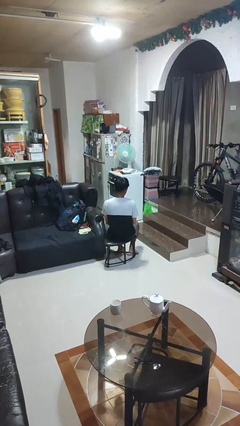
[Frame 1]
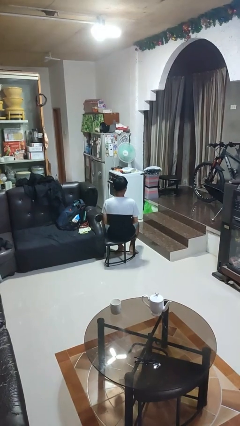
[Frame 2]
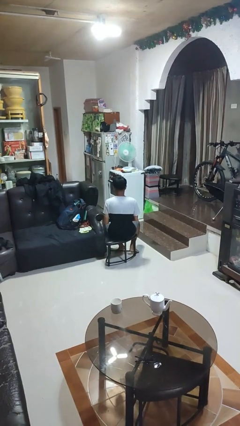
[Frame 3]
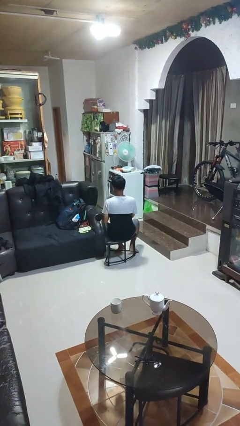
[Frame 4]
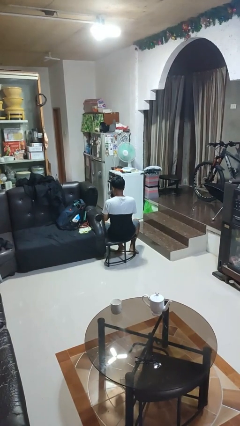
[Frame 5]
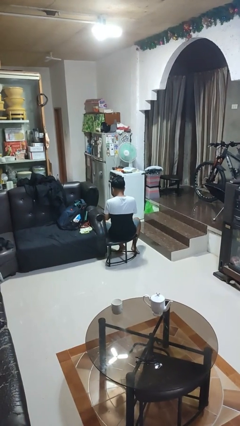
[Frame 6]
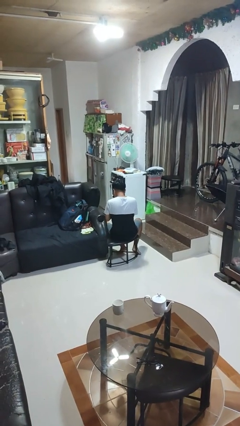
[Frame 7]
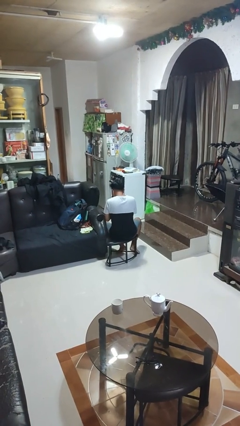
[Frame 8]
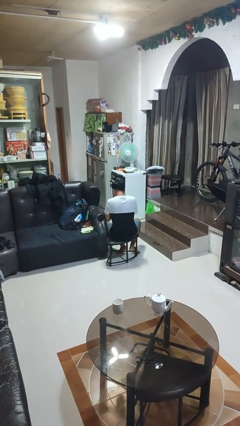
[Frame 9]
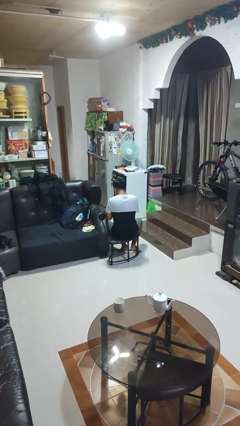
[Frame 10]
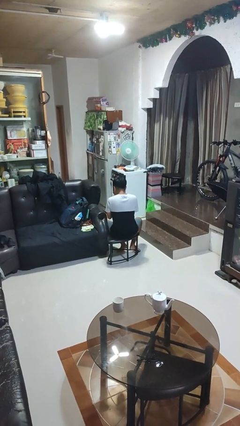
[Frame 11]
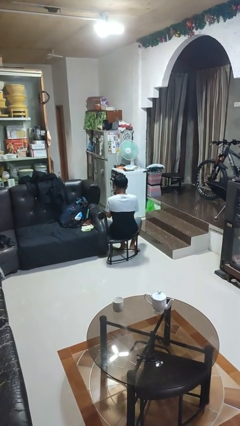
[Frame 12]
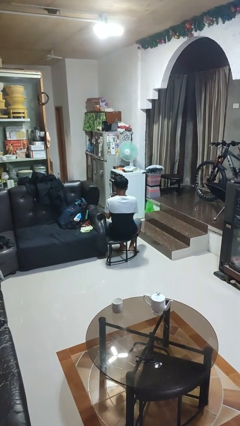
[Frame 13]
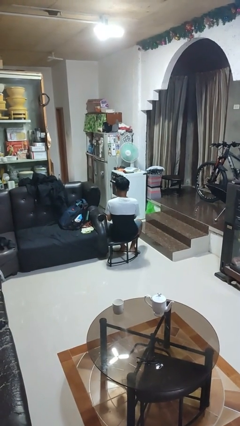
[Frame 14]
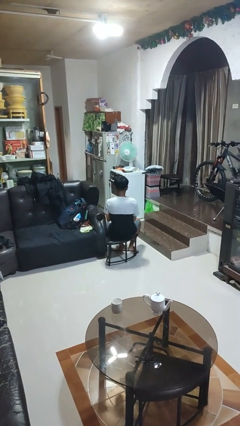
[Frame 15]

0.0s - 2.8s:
person dries hair with hairdryer

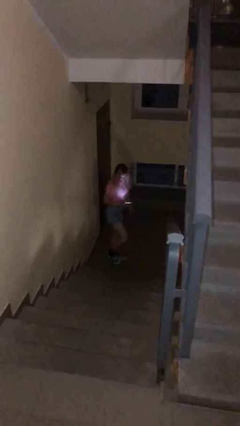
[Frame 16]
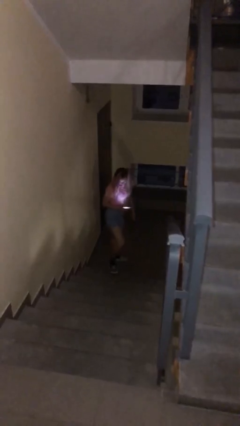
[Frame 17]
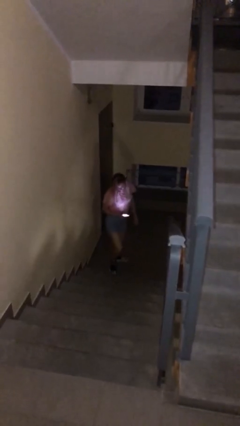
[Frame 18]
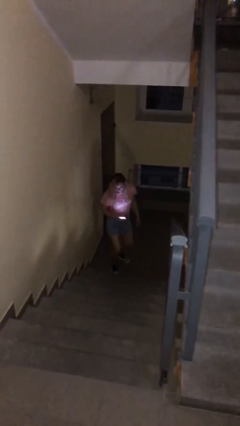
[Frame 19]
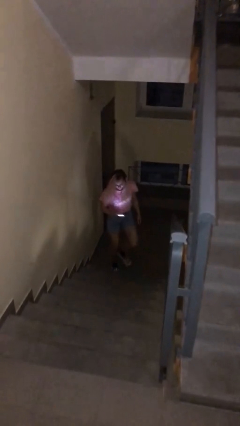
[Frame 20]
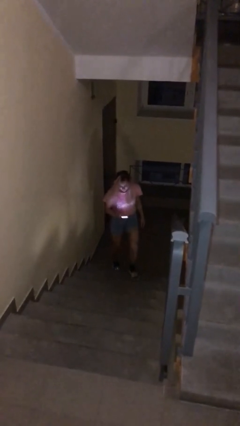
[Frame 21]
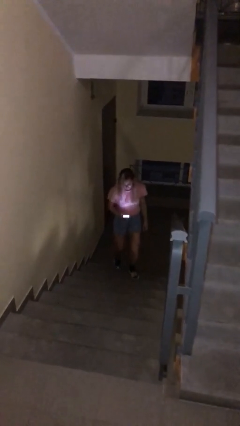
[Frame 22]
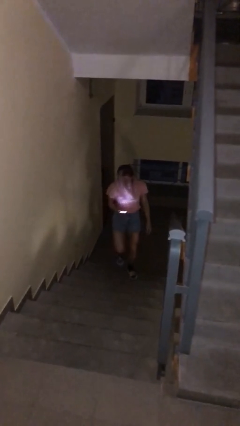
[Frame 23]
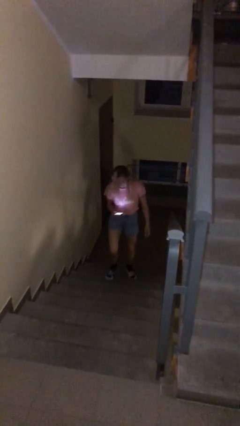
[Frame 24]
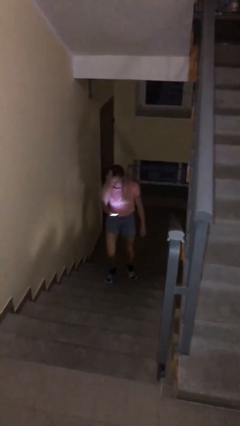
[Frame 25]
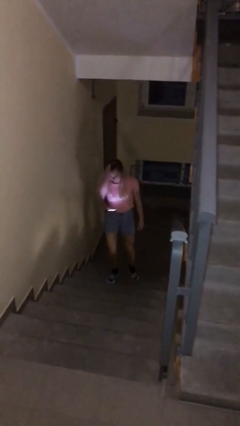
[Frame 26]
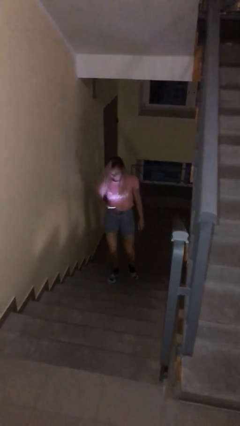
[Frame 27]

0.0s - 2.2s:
person climbs up stairs

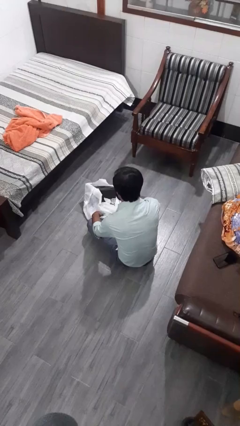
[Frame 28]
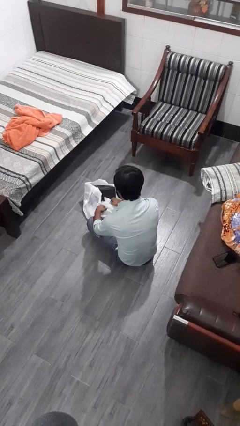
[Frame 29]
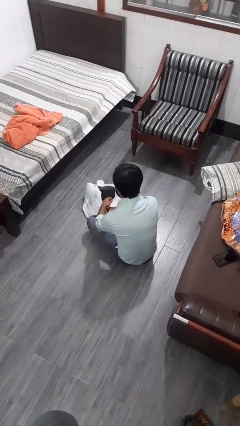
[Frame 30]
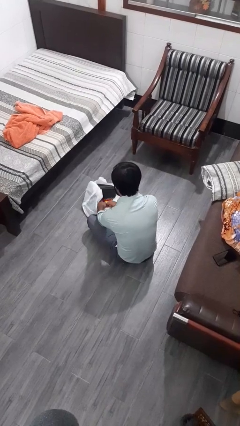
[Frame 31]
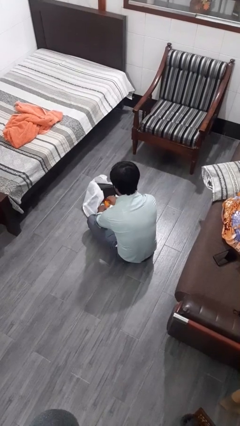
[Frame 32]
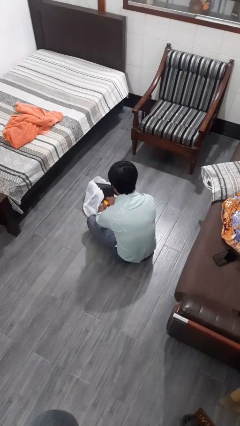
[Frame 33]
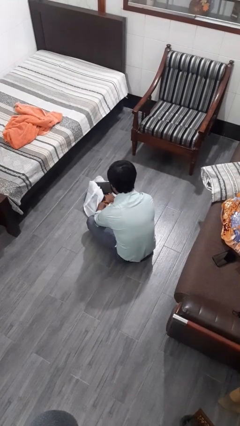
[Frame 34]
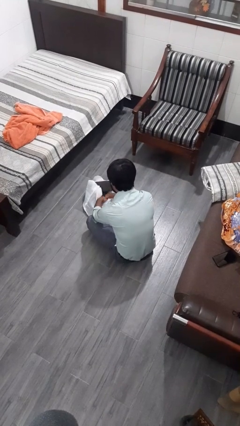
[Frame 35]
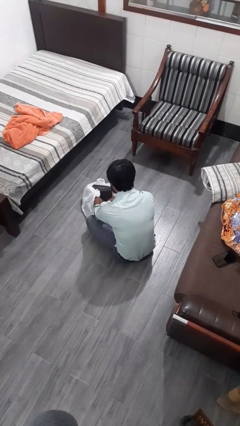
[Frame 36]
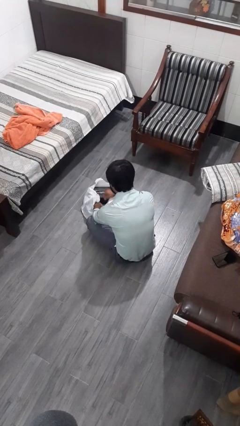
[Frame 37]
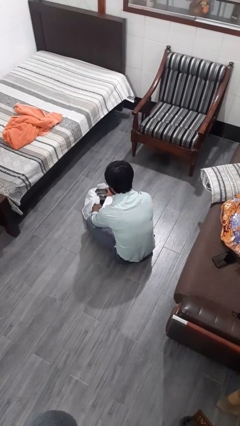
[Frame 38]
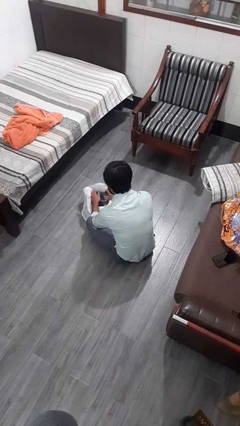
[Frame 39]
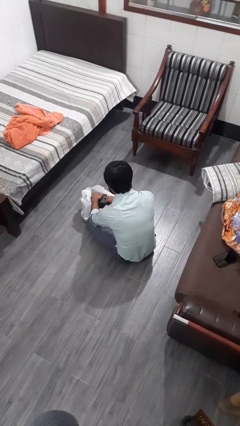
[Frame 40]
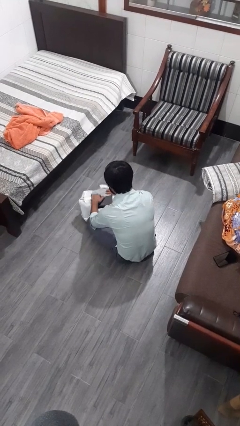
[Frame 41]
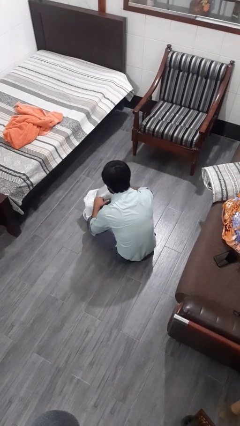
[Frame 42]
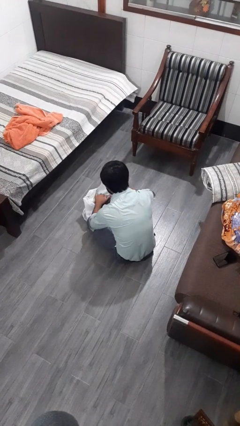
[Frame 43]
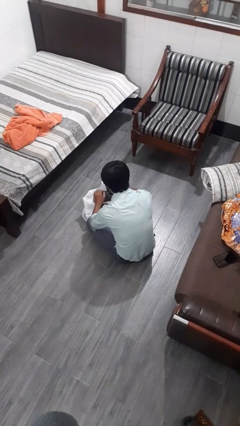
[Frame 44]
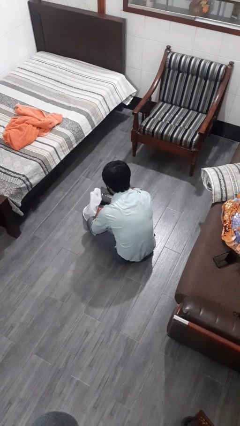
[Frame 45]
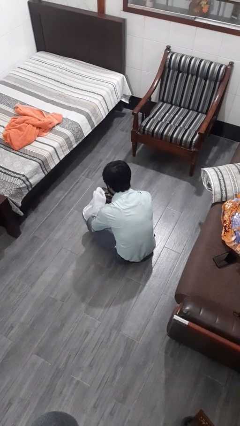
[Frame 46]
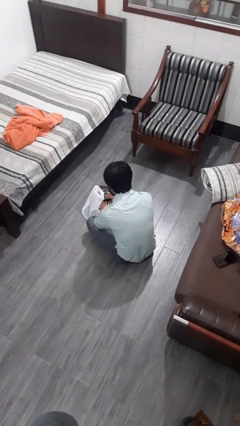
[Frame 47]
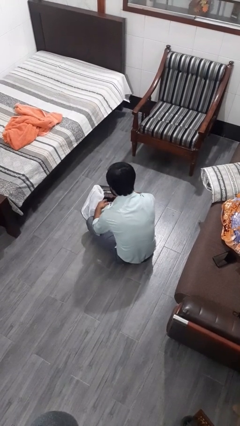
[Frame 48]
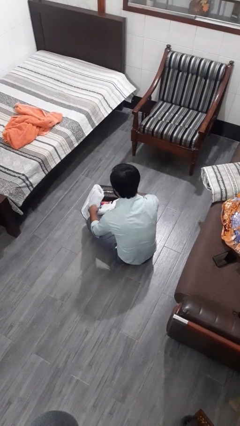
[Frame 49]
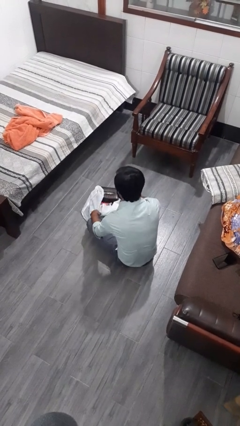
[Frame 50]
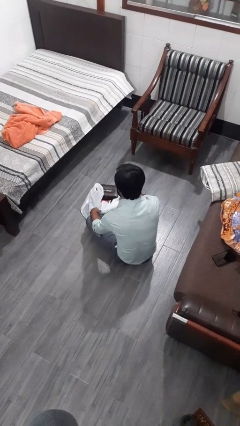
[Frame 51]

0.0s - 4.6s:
person searches in bag

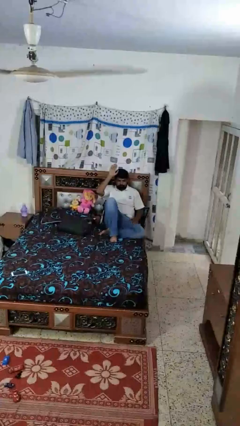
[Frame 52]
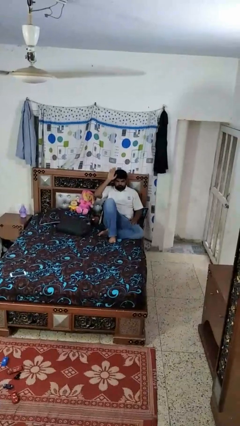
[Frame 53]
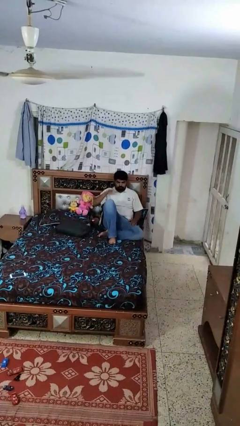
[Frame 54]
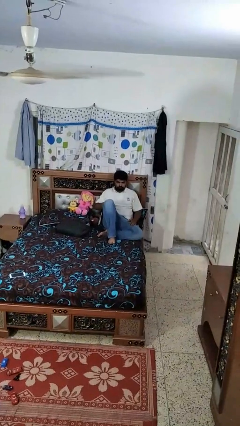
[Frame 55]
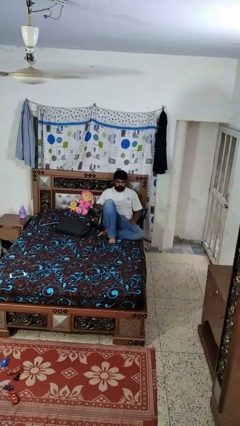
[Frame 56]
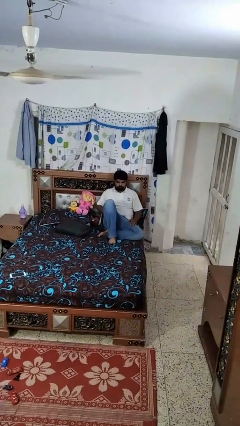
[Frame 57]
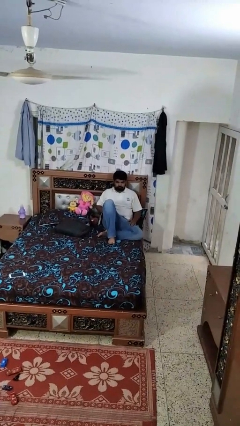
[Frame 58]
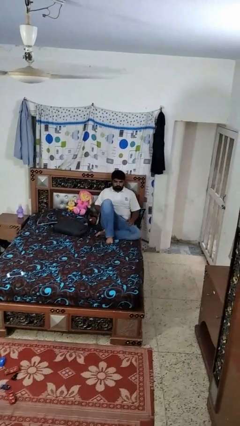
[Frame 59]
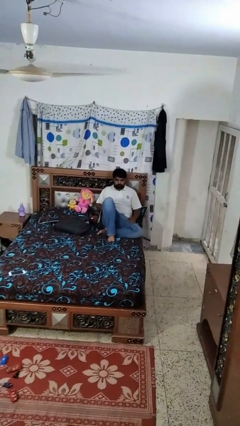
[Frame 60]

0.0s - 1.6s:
person gestures lower hand

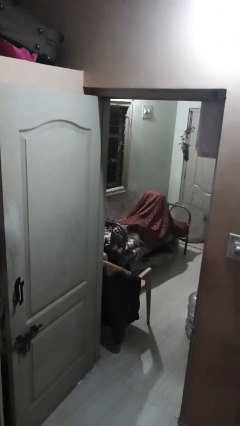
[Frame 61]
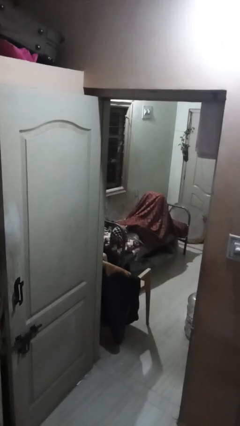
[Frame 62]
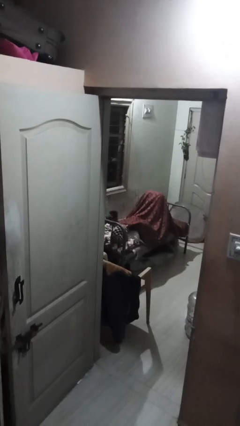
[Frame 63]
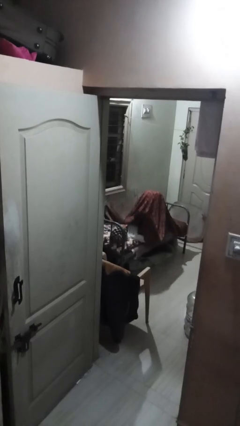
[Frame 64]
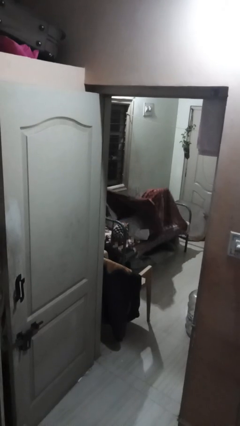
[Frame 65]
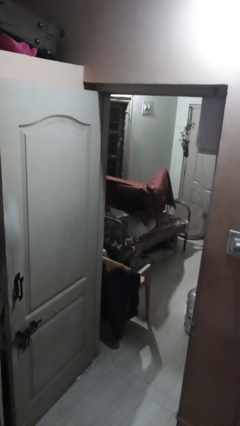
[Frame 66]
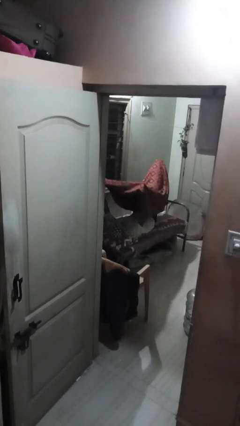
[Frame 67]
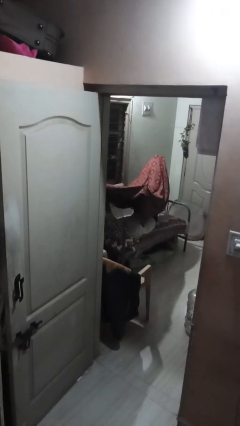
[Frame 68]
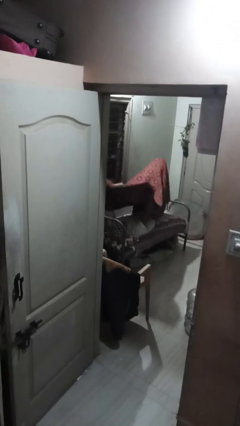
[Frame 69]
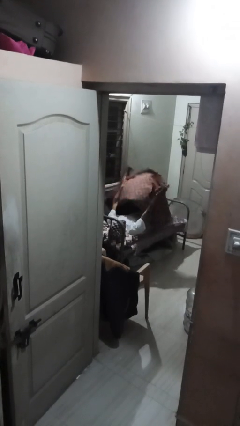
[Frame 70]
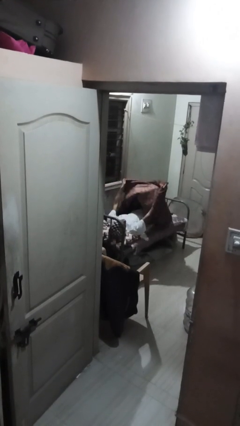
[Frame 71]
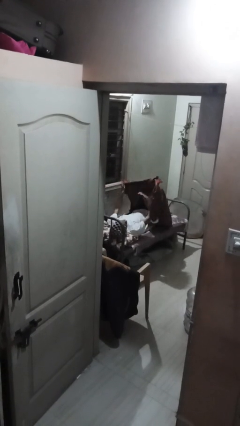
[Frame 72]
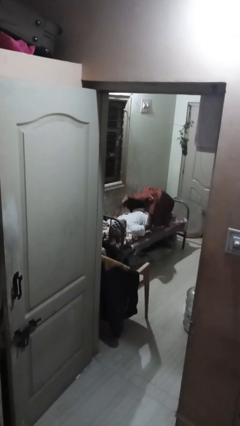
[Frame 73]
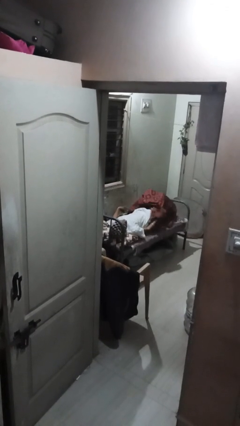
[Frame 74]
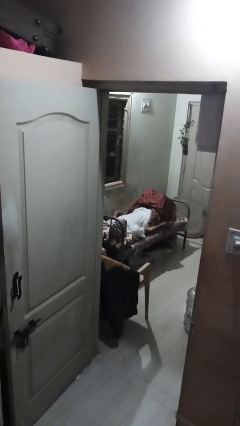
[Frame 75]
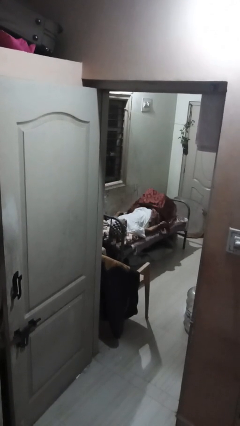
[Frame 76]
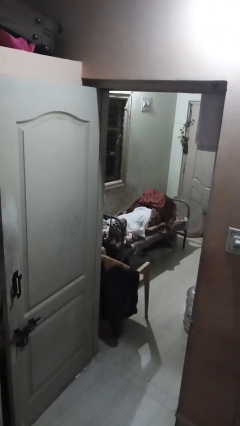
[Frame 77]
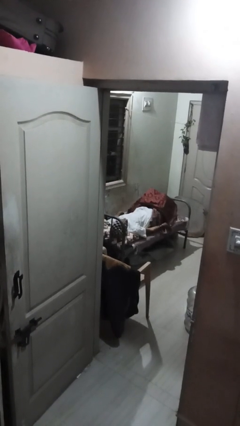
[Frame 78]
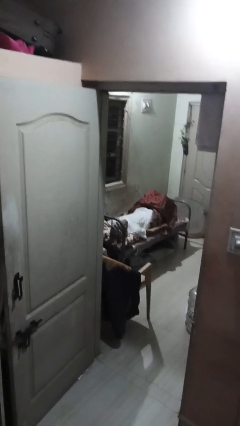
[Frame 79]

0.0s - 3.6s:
person uncovers with bedsheets

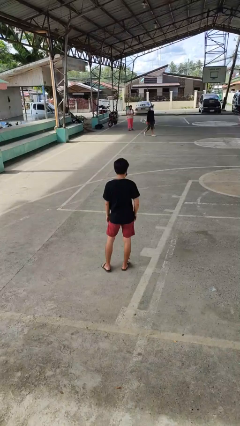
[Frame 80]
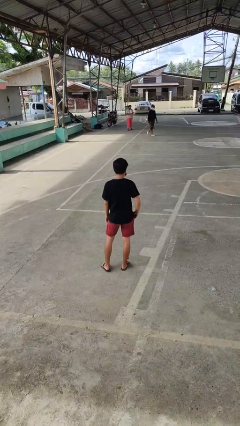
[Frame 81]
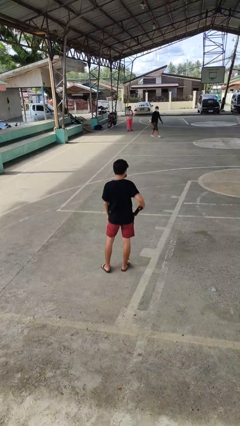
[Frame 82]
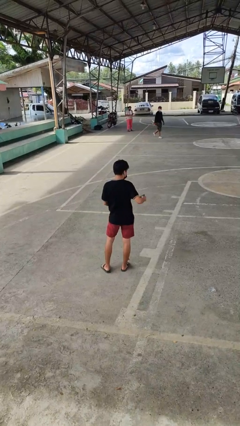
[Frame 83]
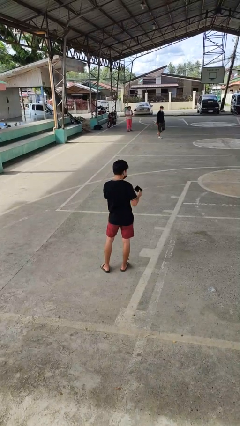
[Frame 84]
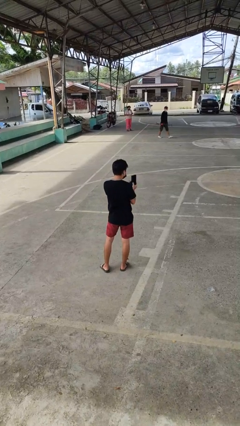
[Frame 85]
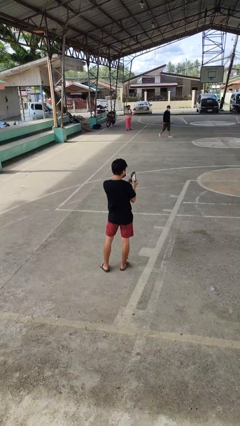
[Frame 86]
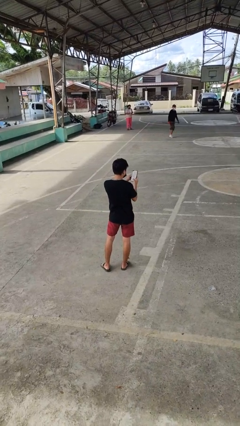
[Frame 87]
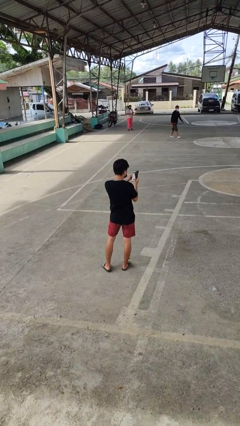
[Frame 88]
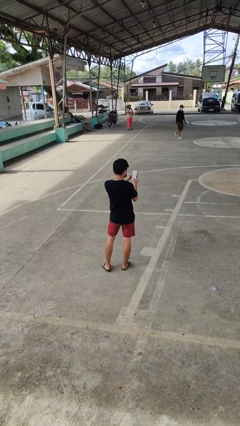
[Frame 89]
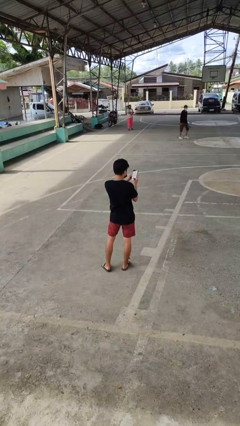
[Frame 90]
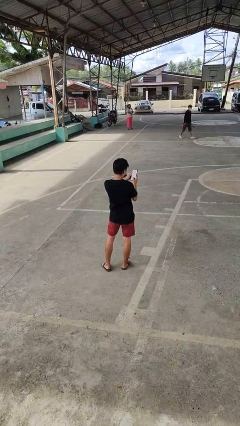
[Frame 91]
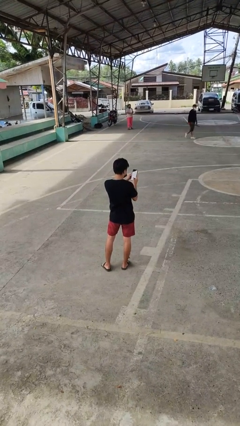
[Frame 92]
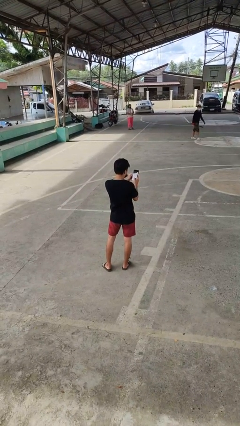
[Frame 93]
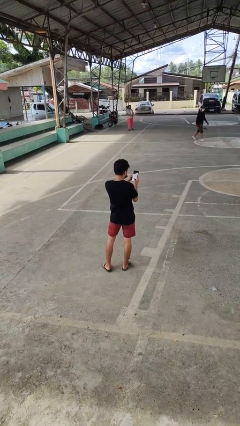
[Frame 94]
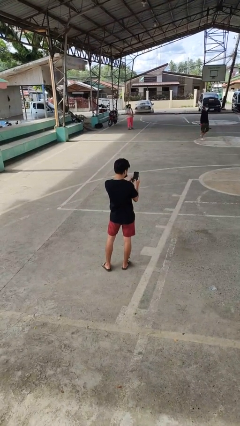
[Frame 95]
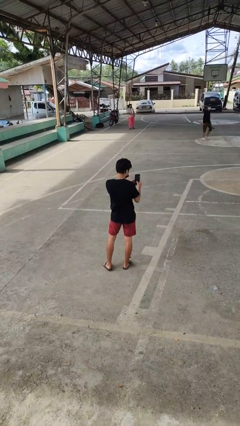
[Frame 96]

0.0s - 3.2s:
person takes phone from pocket
